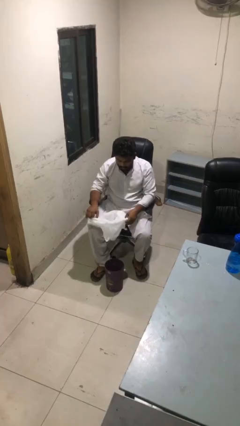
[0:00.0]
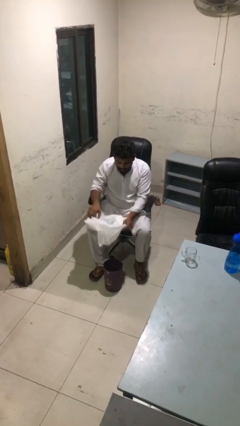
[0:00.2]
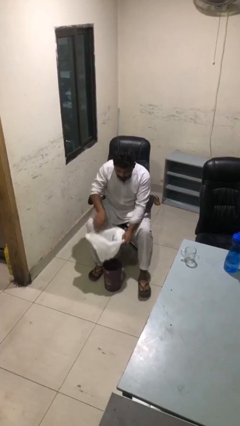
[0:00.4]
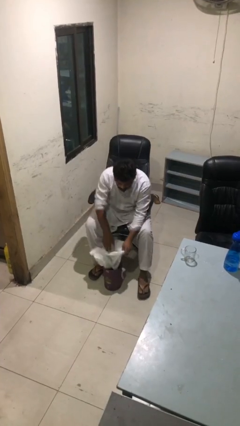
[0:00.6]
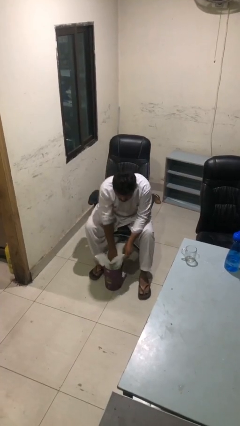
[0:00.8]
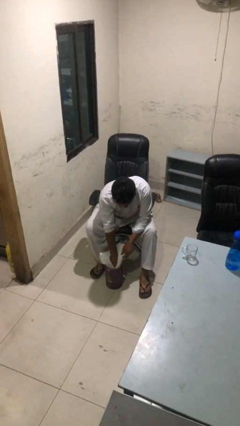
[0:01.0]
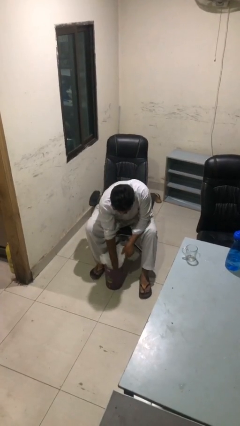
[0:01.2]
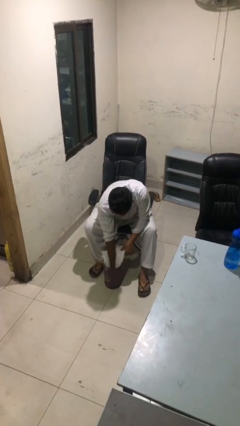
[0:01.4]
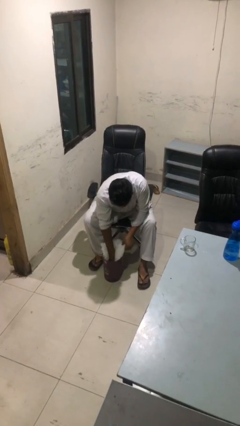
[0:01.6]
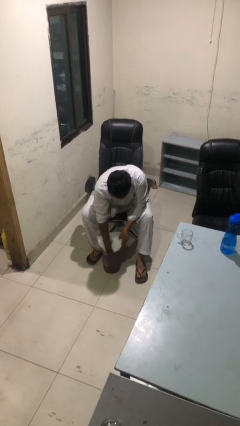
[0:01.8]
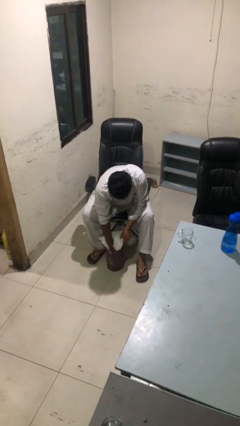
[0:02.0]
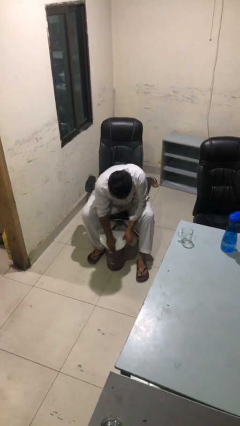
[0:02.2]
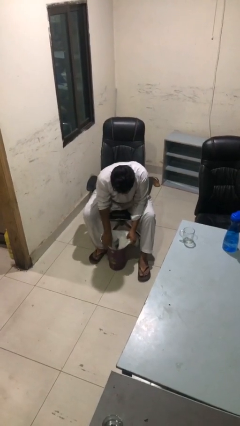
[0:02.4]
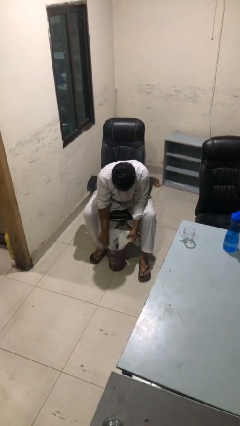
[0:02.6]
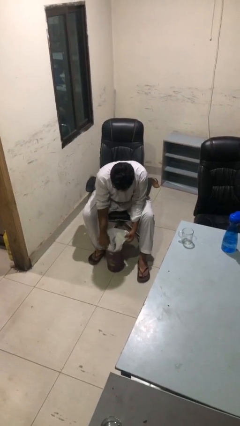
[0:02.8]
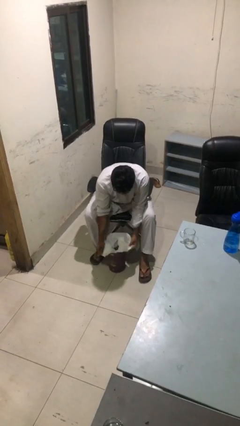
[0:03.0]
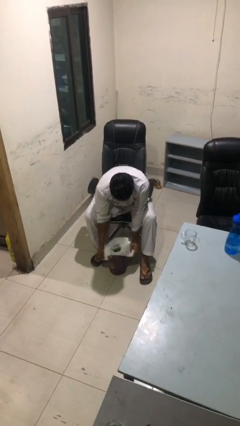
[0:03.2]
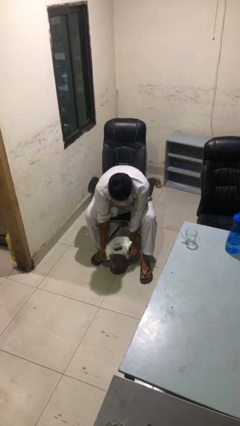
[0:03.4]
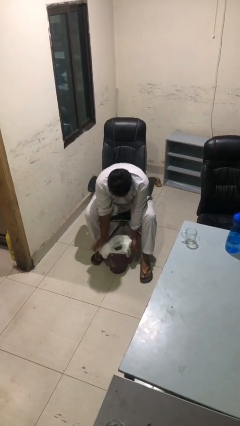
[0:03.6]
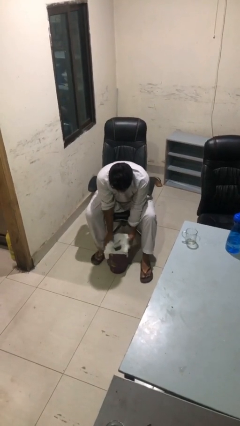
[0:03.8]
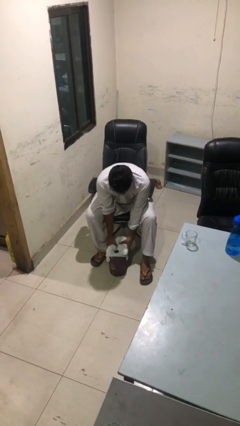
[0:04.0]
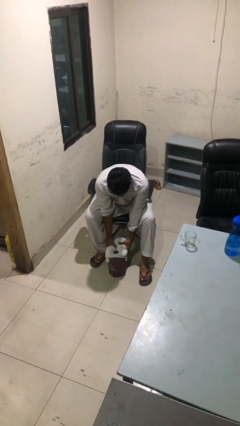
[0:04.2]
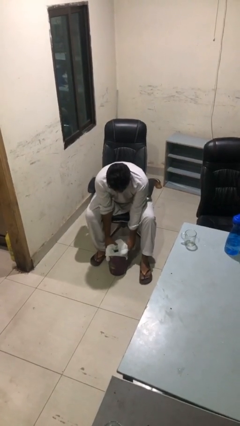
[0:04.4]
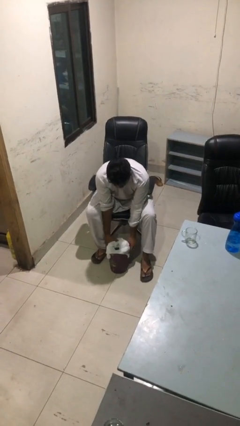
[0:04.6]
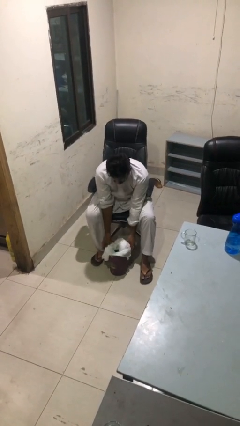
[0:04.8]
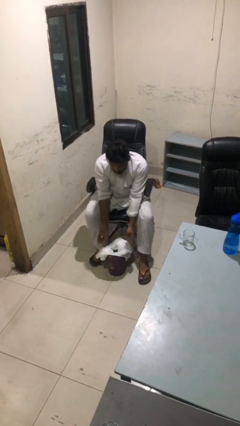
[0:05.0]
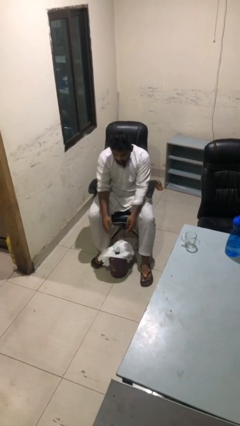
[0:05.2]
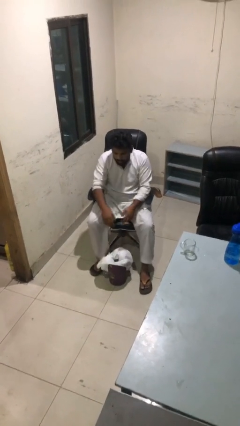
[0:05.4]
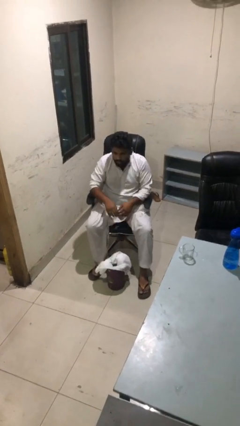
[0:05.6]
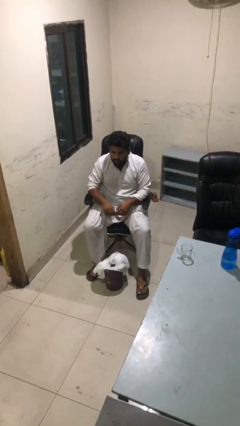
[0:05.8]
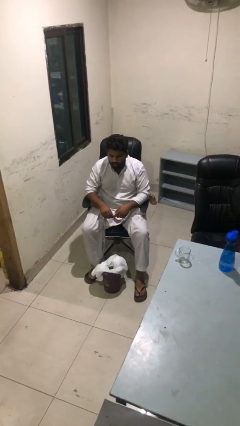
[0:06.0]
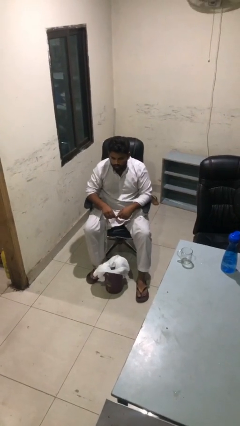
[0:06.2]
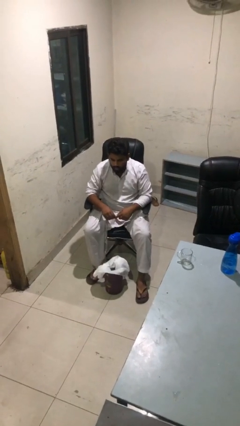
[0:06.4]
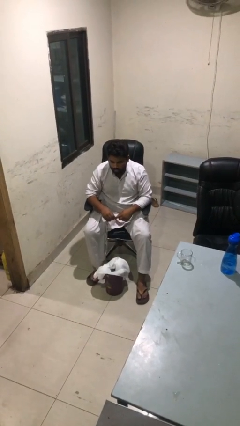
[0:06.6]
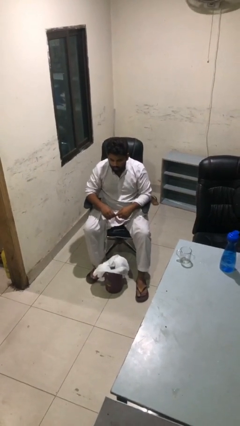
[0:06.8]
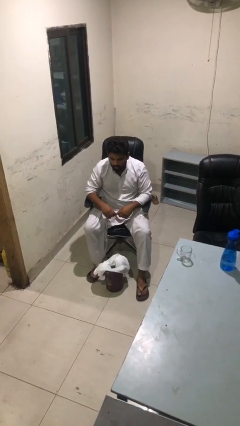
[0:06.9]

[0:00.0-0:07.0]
person inserts trashbag into trashcan

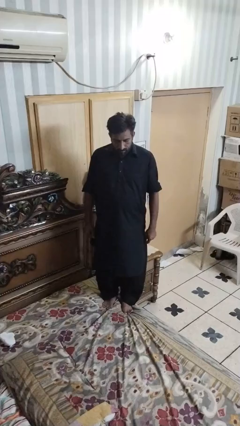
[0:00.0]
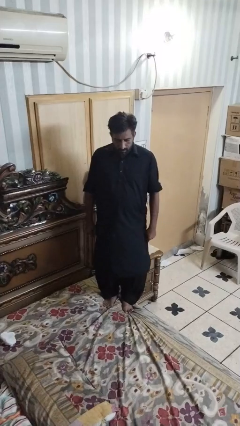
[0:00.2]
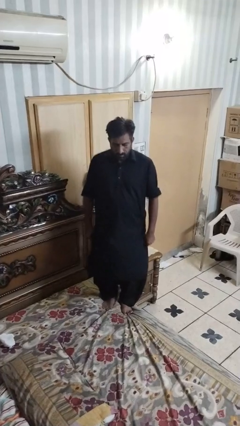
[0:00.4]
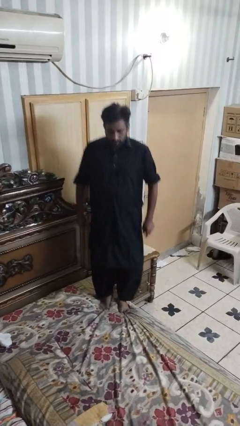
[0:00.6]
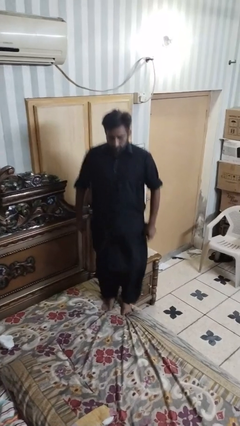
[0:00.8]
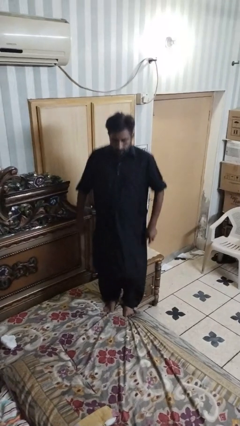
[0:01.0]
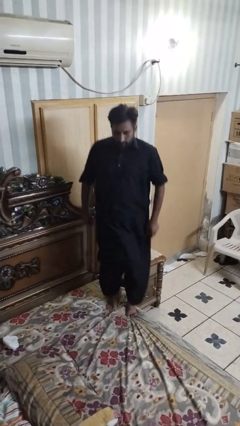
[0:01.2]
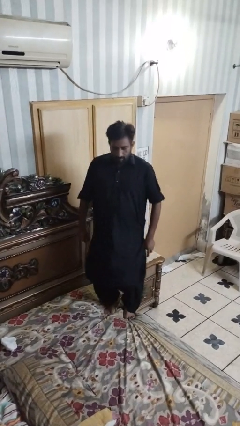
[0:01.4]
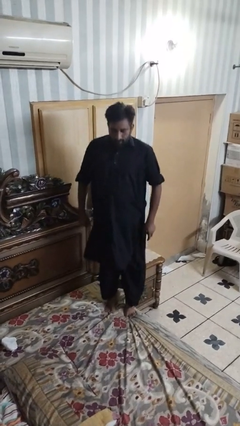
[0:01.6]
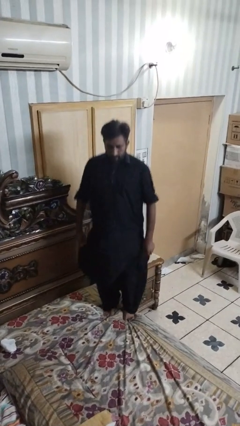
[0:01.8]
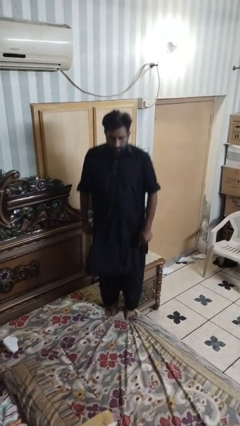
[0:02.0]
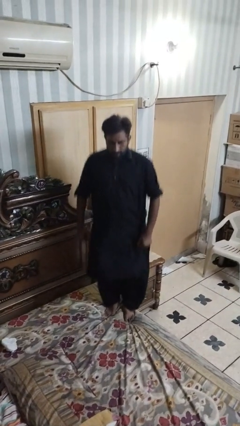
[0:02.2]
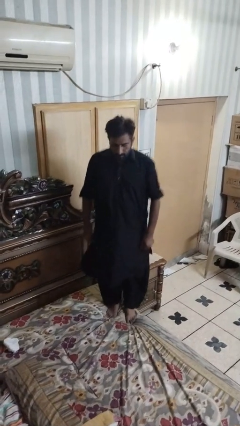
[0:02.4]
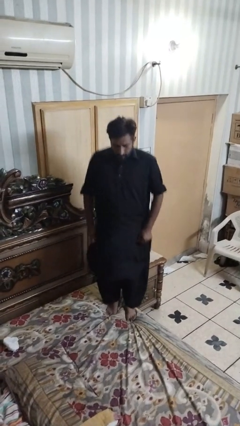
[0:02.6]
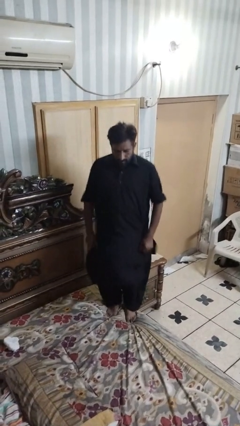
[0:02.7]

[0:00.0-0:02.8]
person jumps on bed

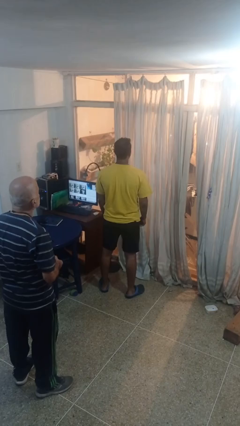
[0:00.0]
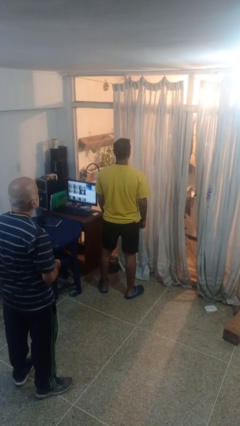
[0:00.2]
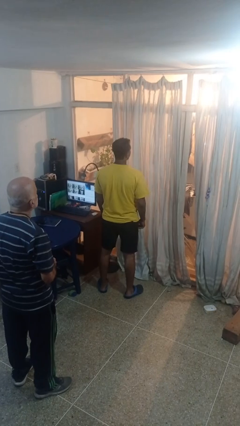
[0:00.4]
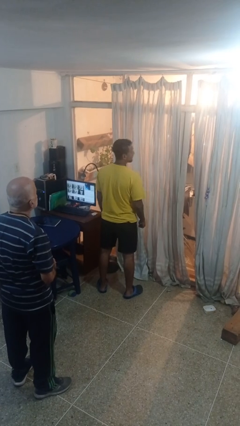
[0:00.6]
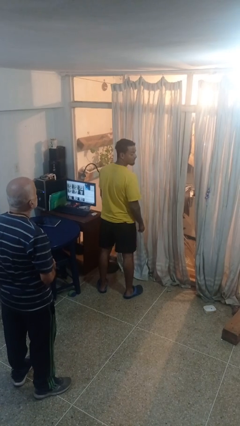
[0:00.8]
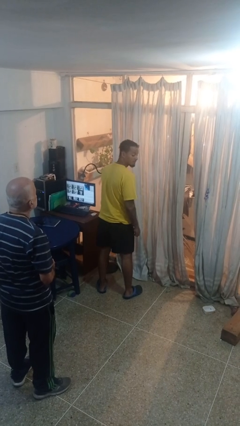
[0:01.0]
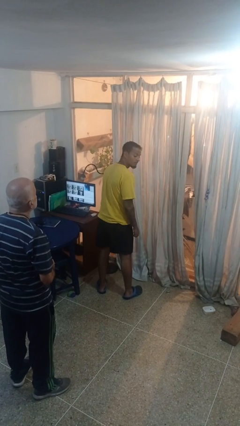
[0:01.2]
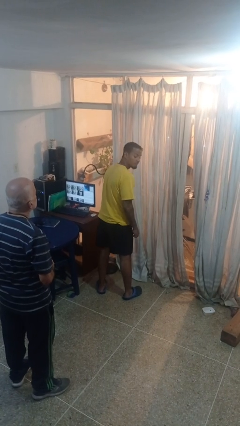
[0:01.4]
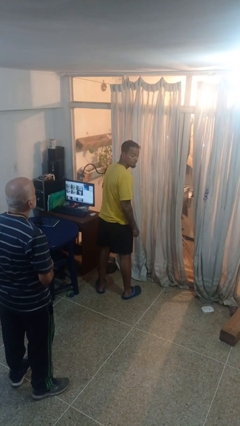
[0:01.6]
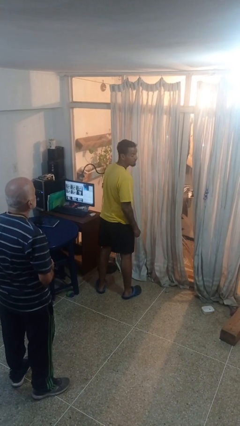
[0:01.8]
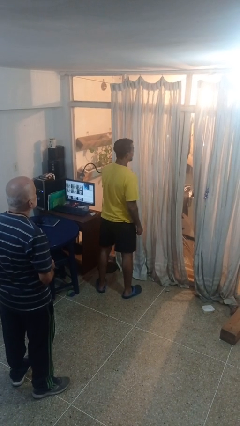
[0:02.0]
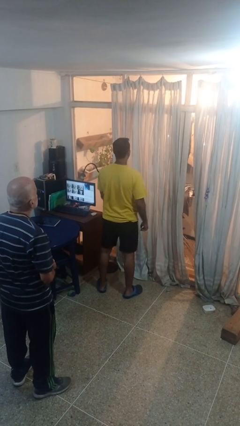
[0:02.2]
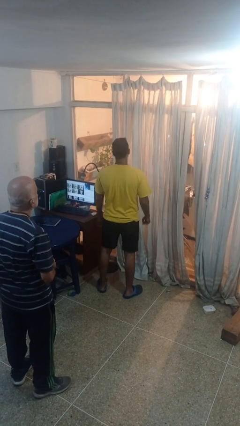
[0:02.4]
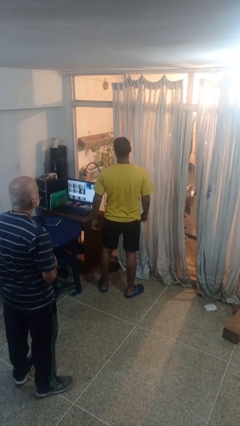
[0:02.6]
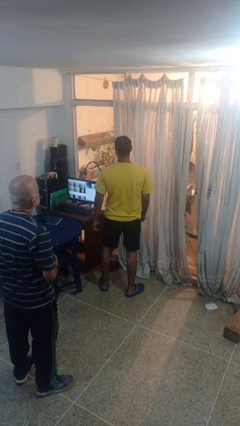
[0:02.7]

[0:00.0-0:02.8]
person looks over shoulder

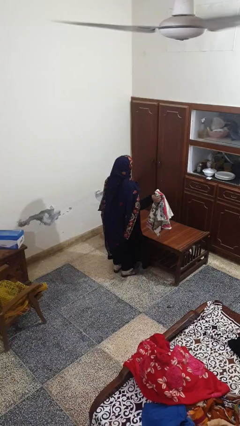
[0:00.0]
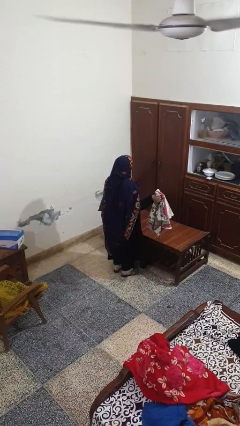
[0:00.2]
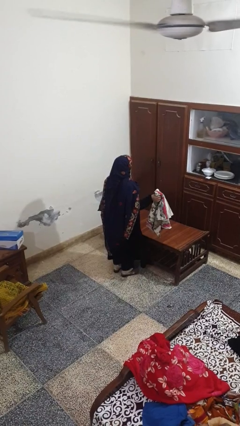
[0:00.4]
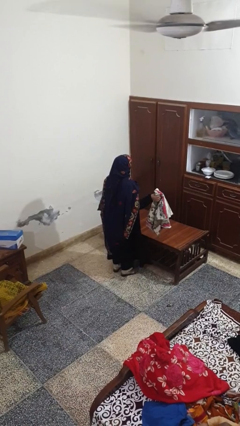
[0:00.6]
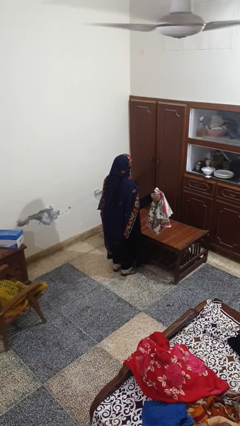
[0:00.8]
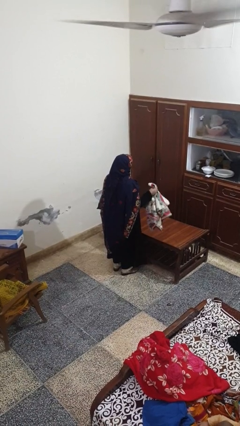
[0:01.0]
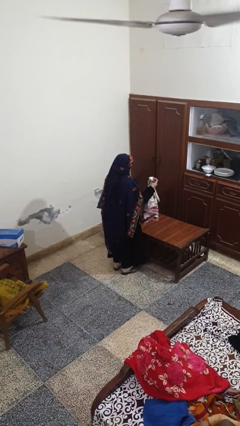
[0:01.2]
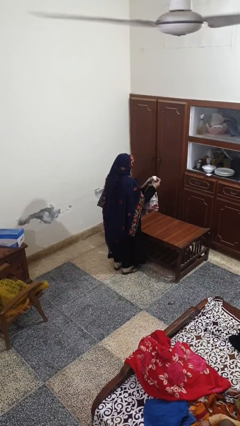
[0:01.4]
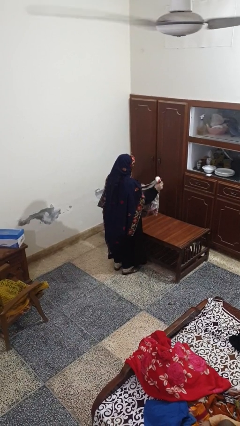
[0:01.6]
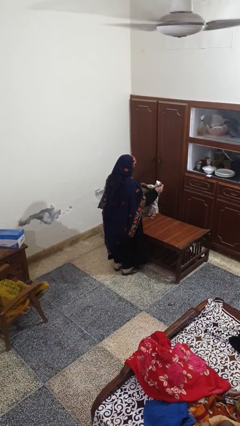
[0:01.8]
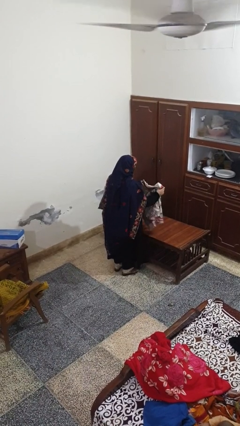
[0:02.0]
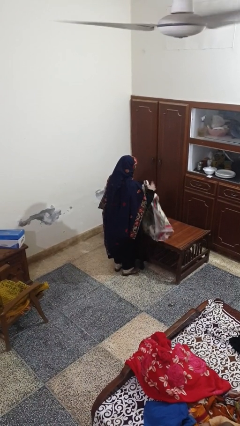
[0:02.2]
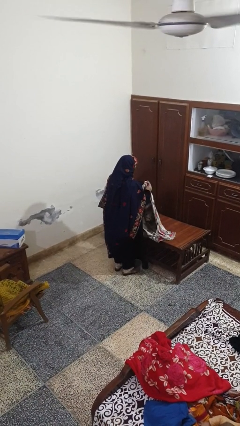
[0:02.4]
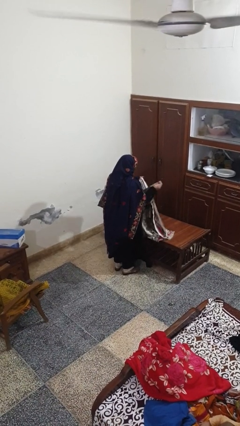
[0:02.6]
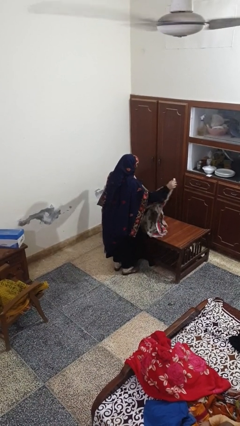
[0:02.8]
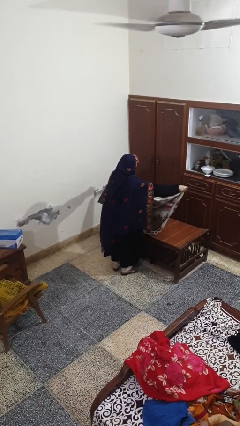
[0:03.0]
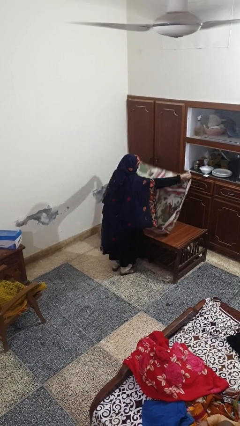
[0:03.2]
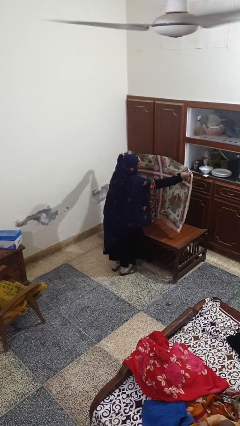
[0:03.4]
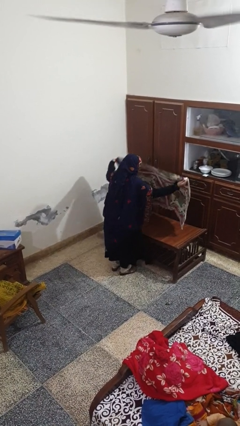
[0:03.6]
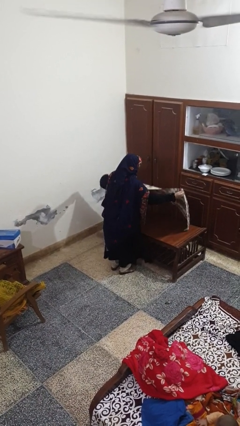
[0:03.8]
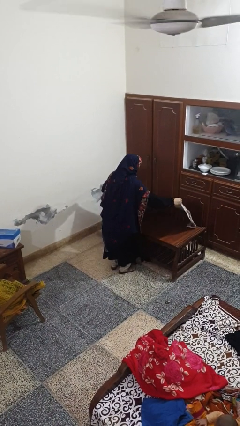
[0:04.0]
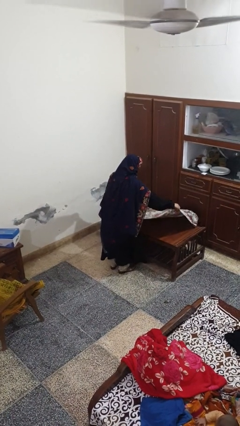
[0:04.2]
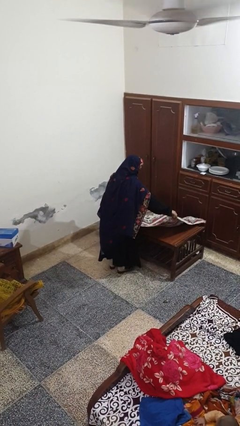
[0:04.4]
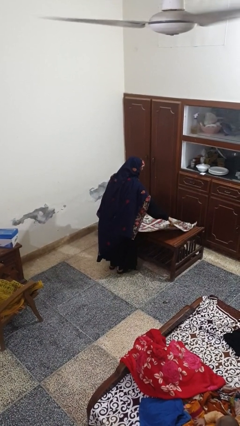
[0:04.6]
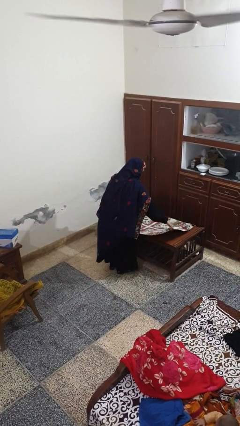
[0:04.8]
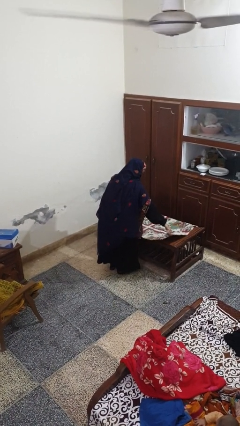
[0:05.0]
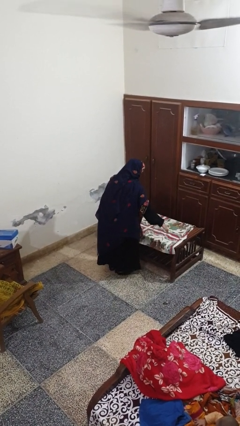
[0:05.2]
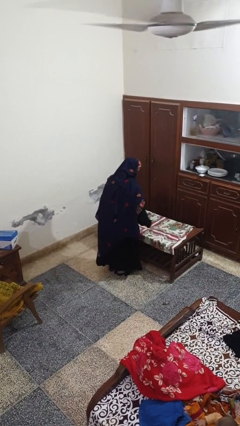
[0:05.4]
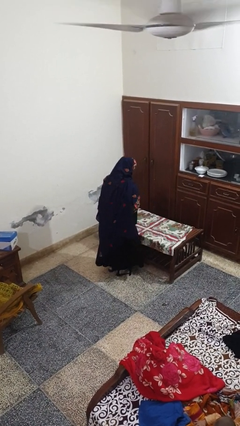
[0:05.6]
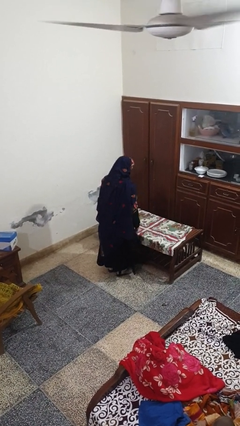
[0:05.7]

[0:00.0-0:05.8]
person spreads tablecloth
